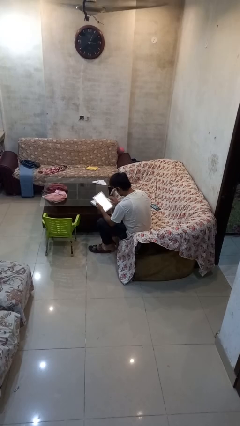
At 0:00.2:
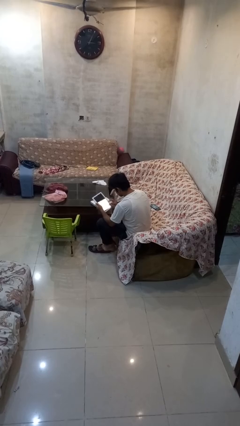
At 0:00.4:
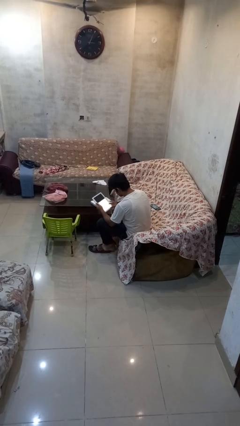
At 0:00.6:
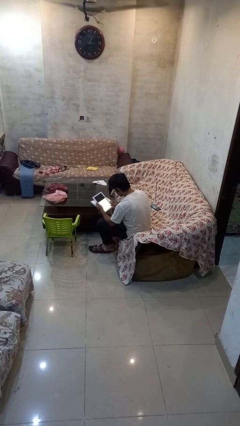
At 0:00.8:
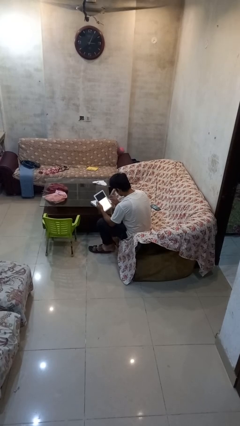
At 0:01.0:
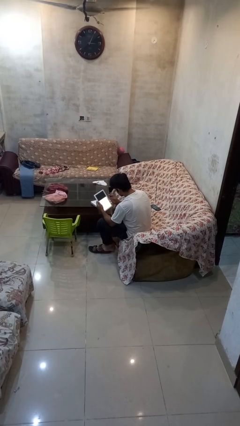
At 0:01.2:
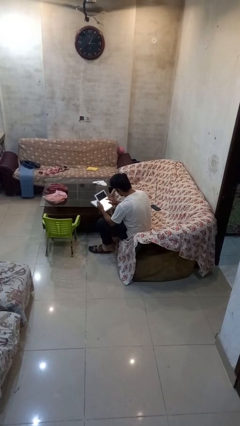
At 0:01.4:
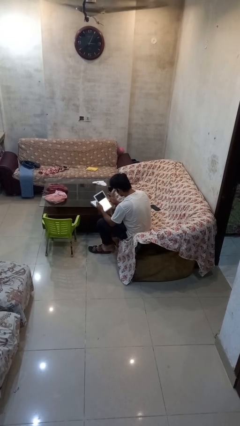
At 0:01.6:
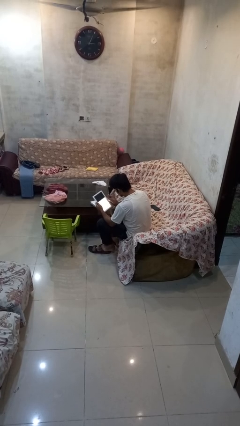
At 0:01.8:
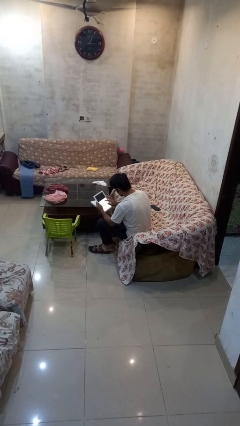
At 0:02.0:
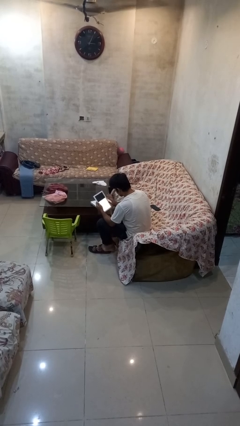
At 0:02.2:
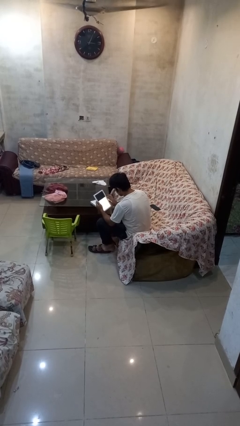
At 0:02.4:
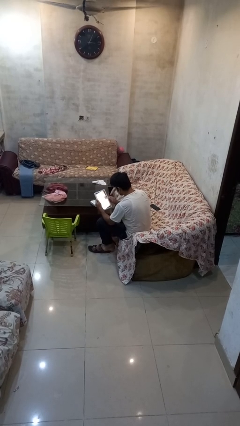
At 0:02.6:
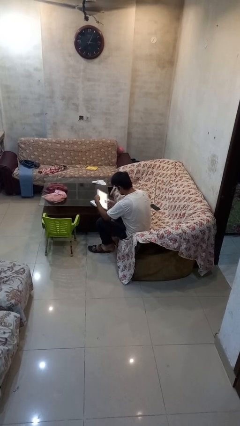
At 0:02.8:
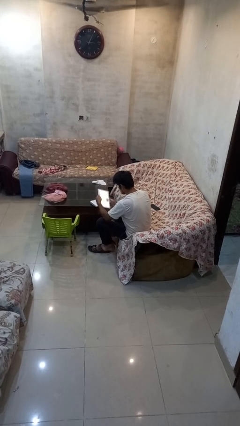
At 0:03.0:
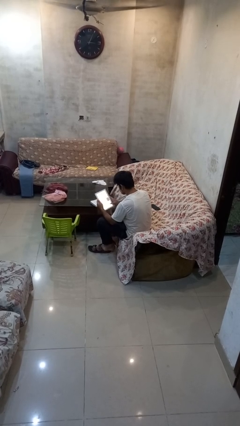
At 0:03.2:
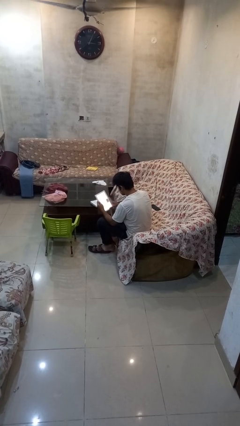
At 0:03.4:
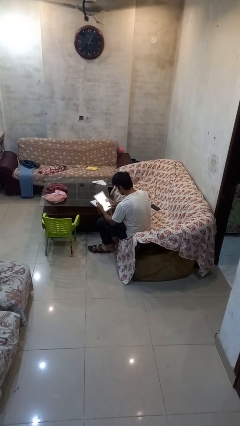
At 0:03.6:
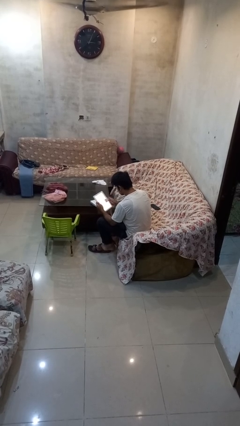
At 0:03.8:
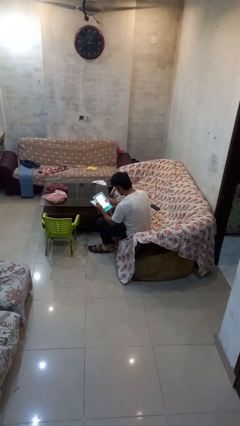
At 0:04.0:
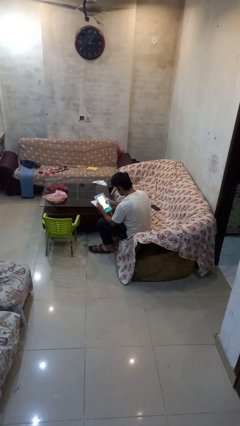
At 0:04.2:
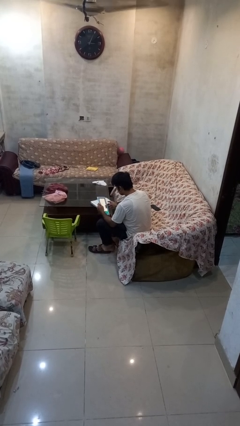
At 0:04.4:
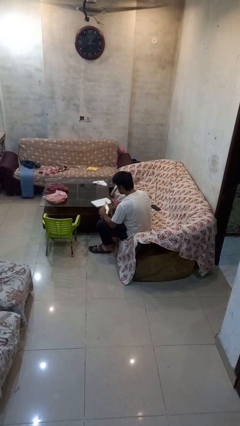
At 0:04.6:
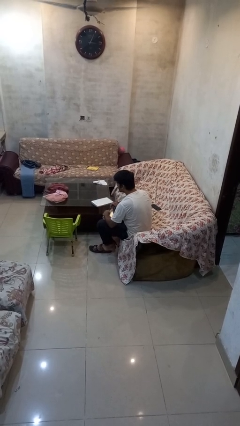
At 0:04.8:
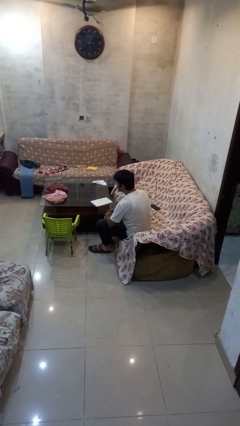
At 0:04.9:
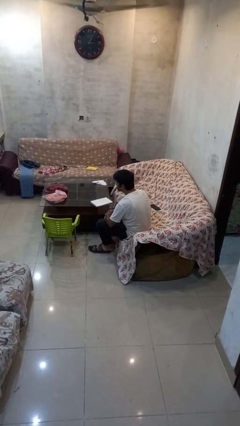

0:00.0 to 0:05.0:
person interacts with tablet

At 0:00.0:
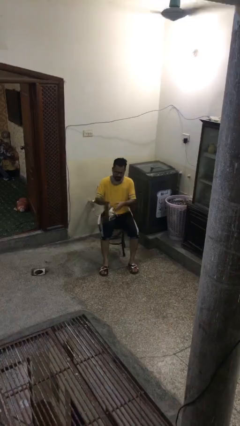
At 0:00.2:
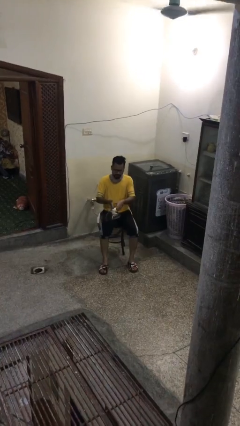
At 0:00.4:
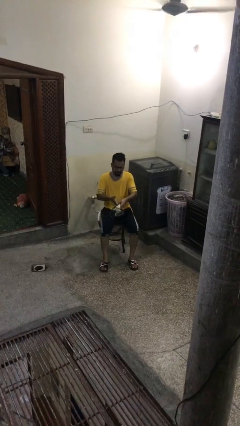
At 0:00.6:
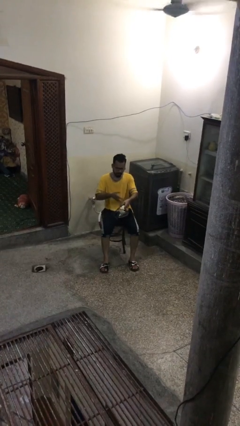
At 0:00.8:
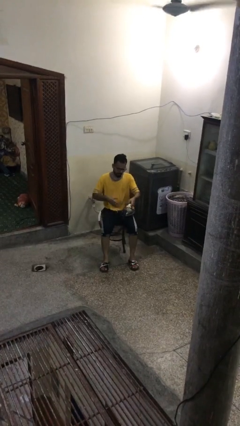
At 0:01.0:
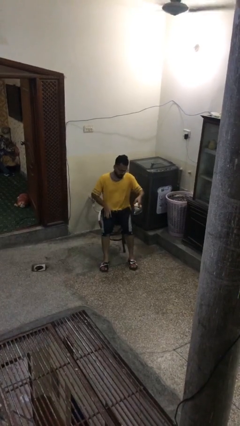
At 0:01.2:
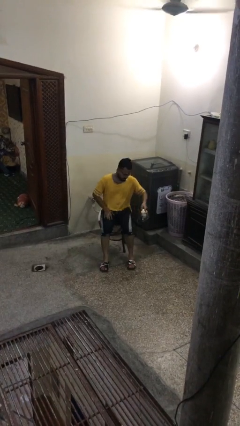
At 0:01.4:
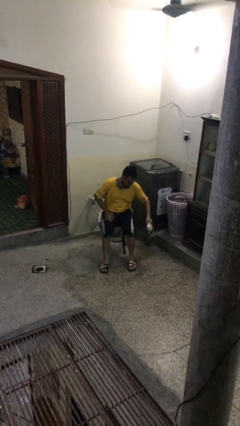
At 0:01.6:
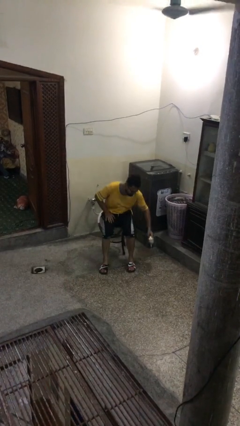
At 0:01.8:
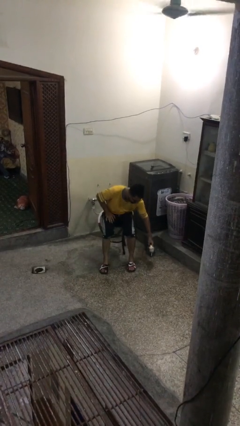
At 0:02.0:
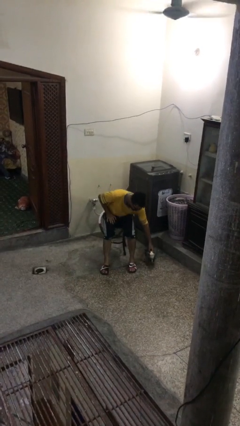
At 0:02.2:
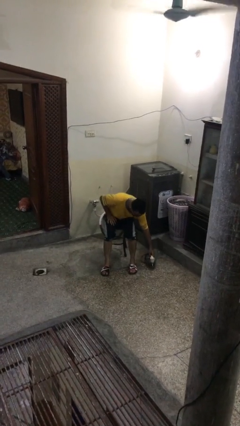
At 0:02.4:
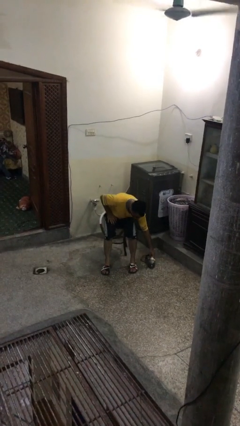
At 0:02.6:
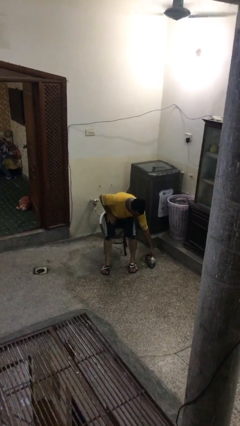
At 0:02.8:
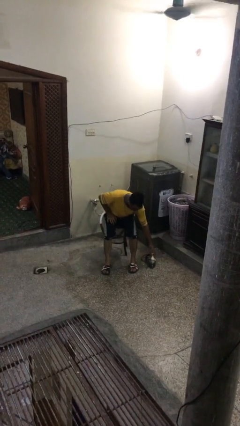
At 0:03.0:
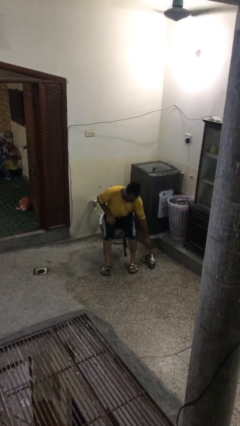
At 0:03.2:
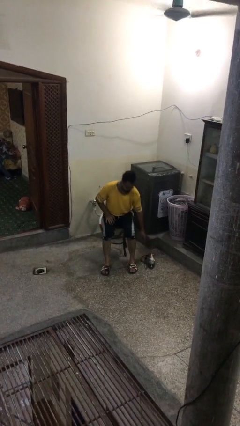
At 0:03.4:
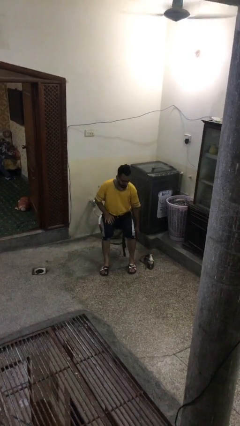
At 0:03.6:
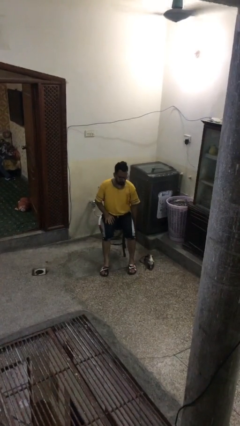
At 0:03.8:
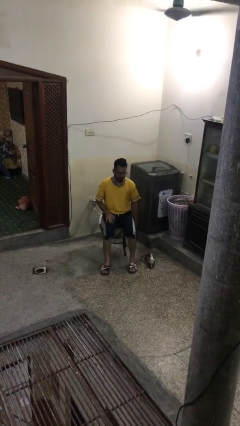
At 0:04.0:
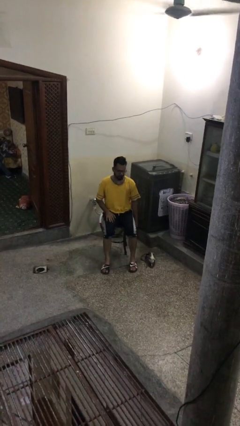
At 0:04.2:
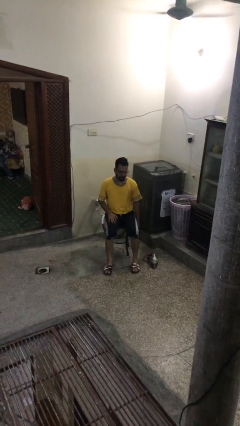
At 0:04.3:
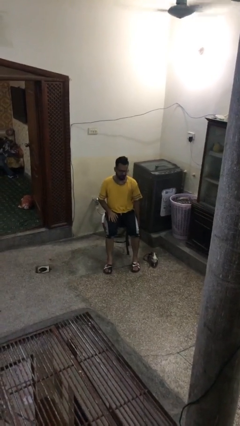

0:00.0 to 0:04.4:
person puts down object on floor

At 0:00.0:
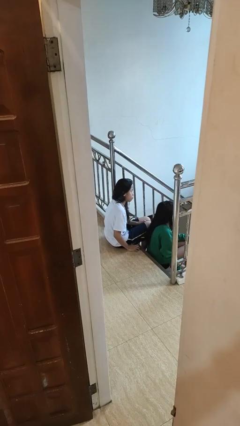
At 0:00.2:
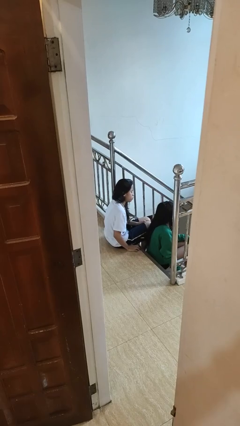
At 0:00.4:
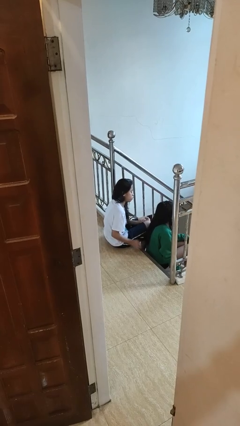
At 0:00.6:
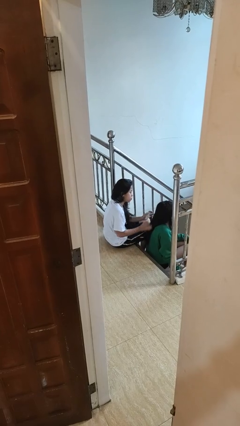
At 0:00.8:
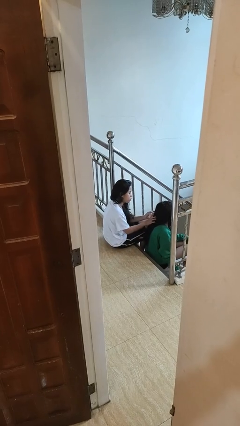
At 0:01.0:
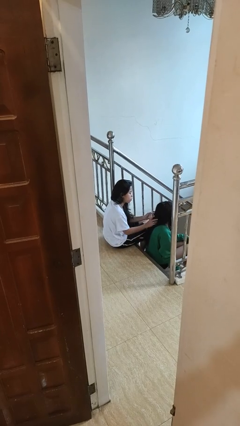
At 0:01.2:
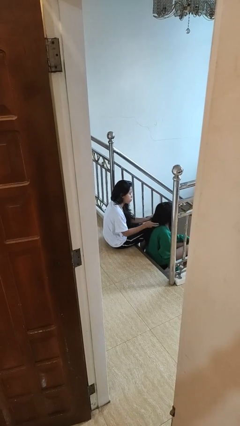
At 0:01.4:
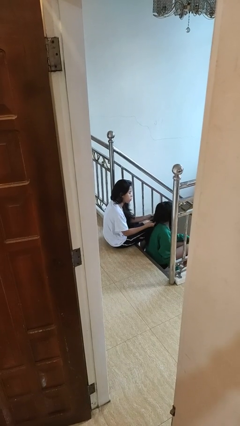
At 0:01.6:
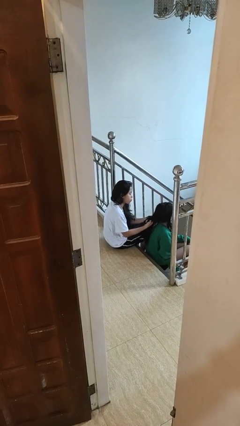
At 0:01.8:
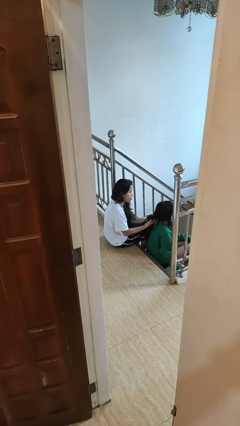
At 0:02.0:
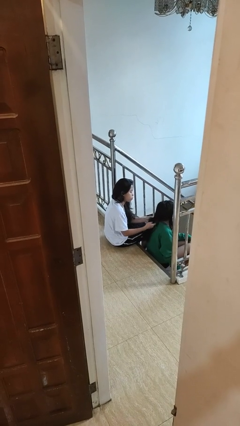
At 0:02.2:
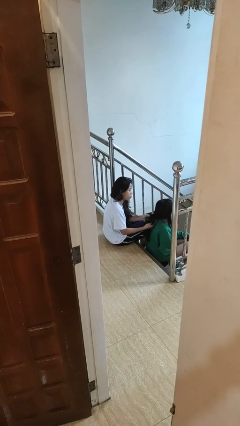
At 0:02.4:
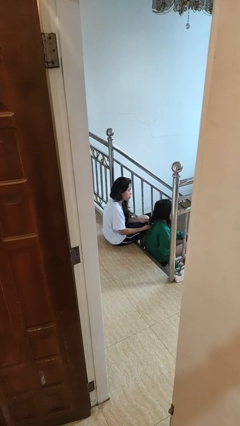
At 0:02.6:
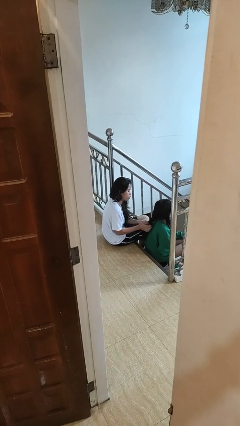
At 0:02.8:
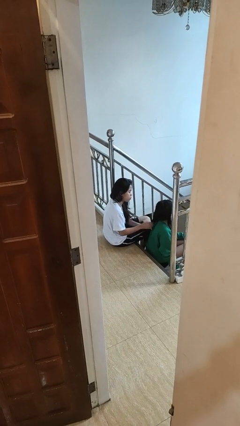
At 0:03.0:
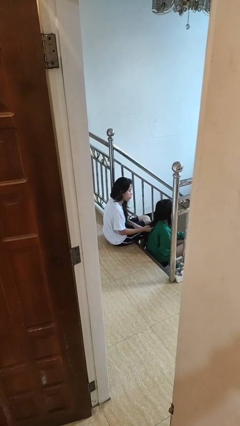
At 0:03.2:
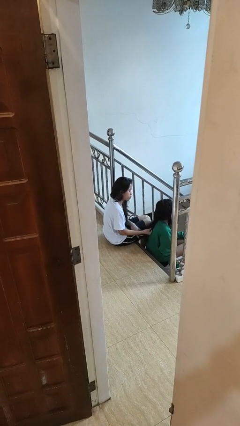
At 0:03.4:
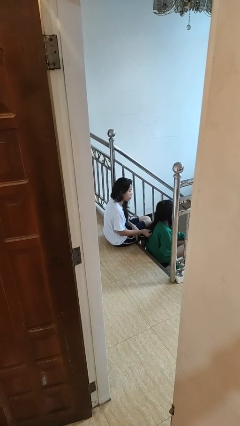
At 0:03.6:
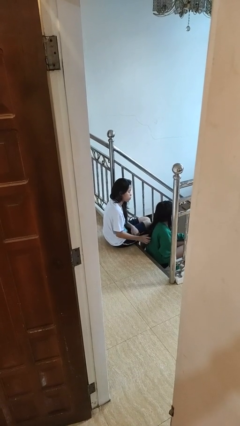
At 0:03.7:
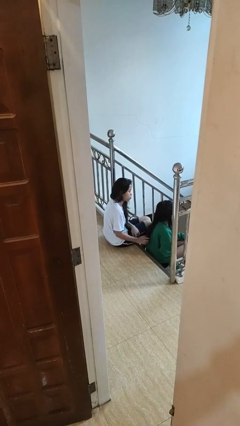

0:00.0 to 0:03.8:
person braids hair of person

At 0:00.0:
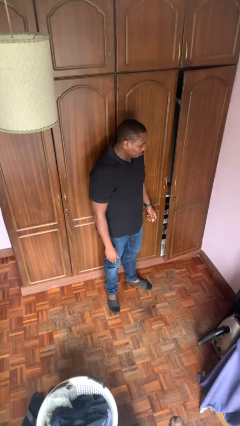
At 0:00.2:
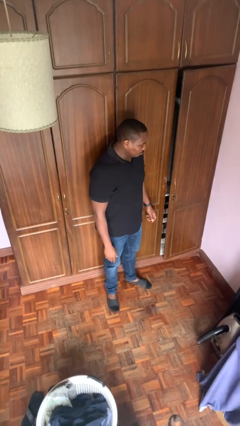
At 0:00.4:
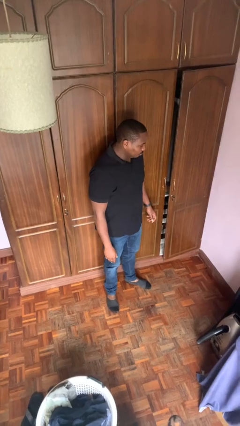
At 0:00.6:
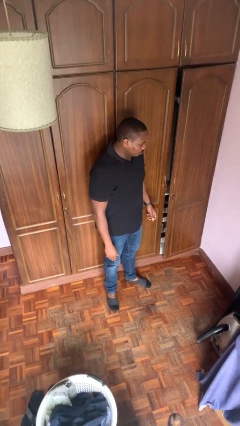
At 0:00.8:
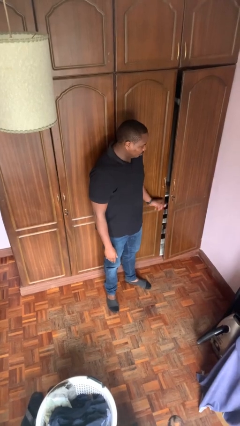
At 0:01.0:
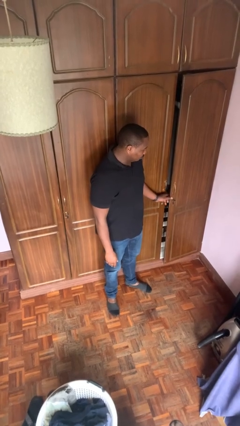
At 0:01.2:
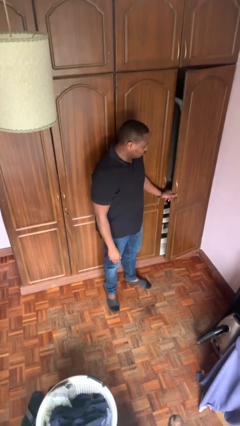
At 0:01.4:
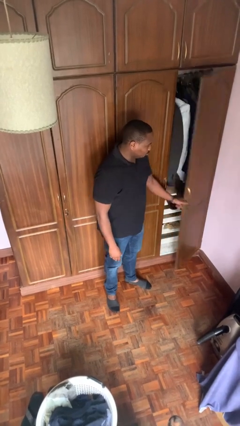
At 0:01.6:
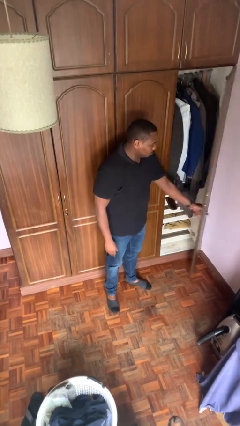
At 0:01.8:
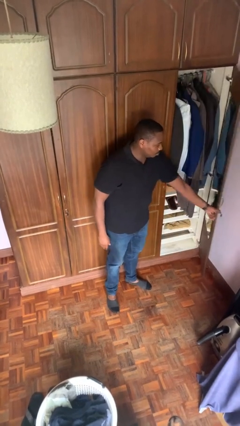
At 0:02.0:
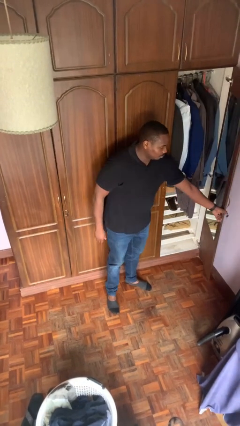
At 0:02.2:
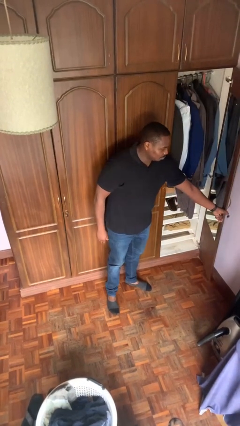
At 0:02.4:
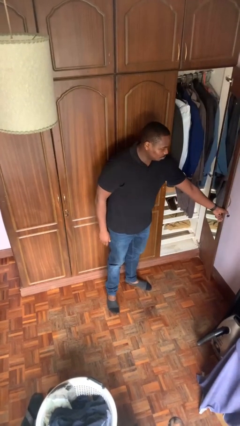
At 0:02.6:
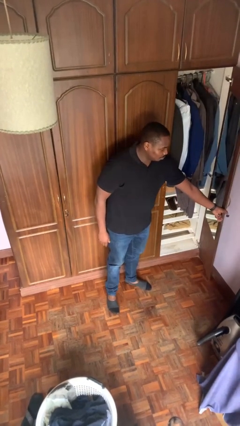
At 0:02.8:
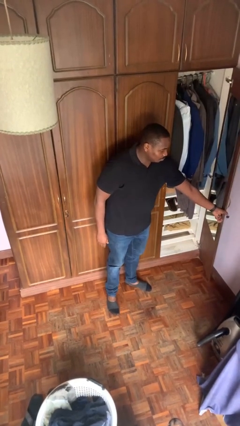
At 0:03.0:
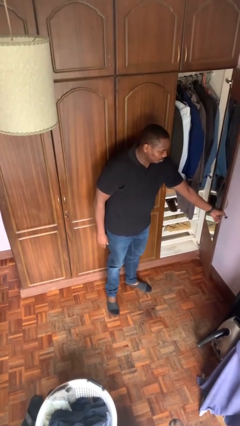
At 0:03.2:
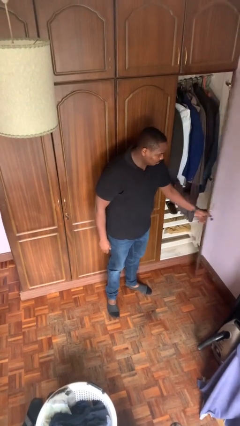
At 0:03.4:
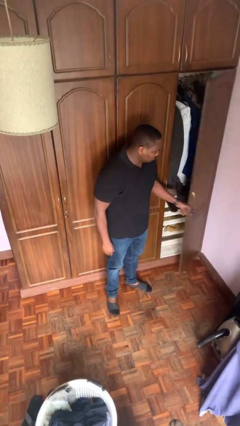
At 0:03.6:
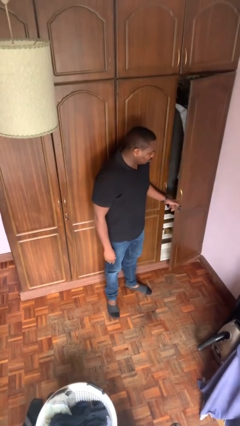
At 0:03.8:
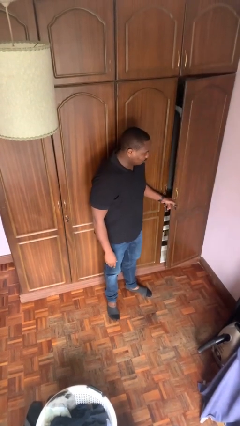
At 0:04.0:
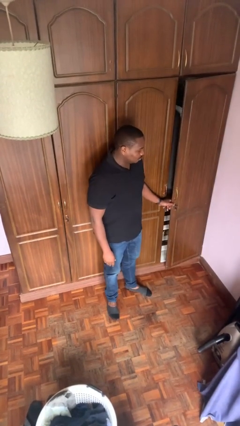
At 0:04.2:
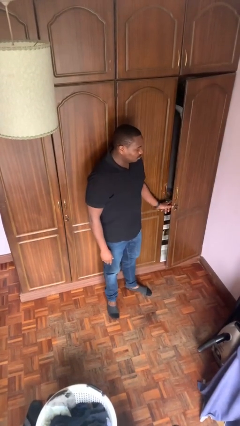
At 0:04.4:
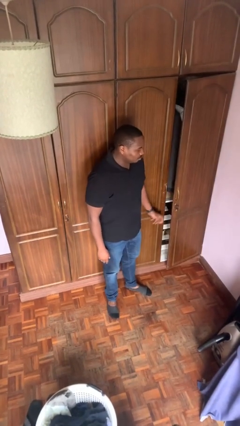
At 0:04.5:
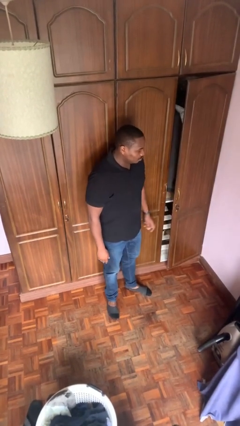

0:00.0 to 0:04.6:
person opens closet door
